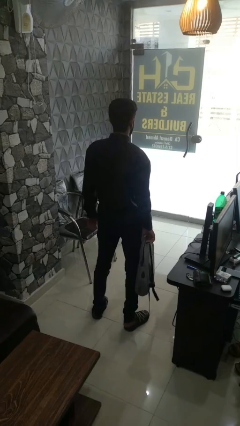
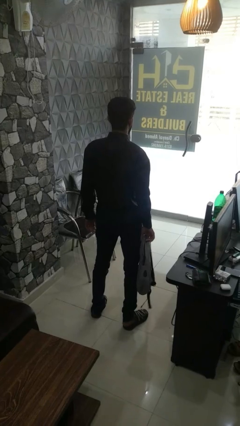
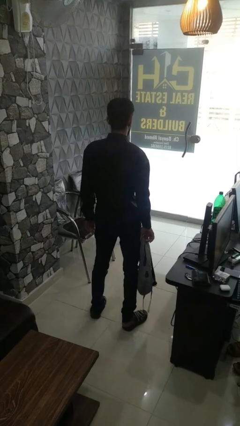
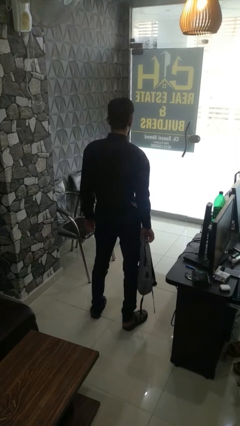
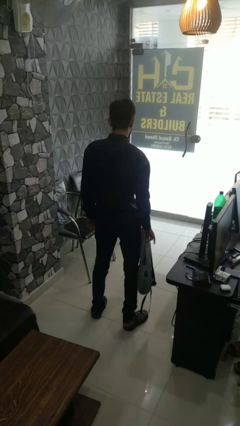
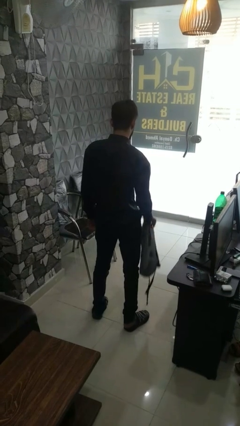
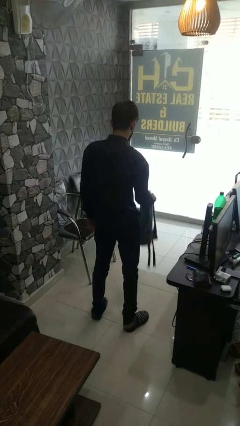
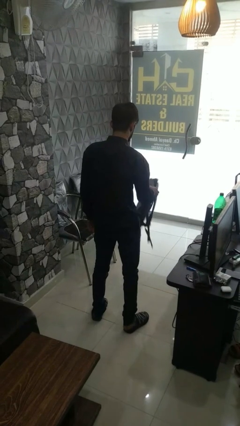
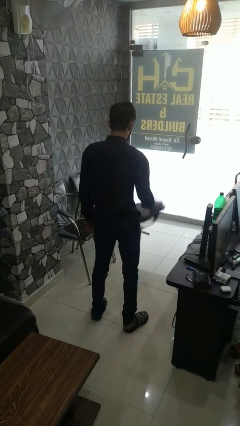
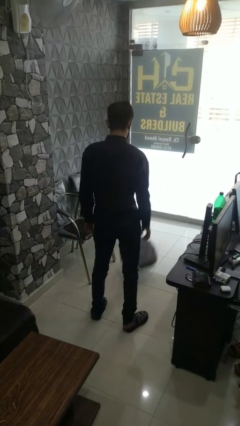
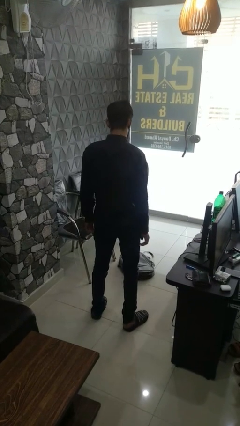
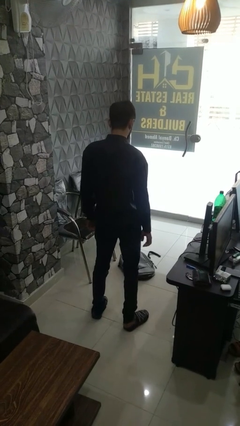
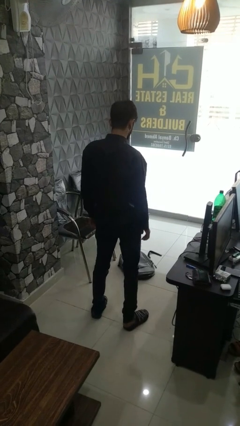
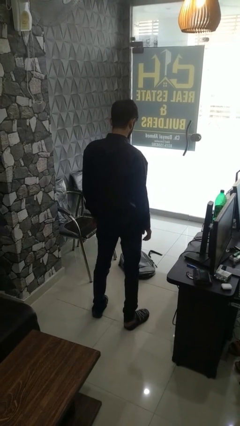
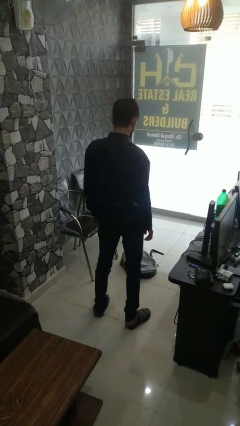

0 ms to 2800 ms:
person throws object into air

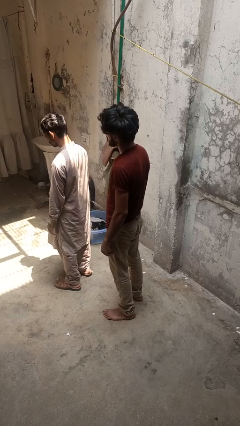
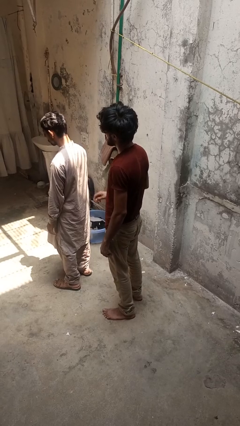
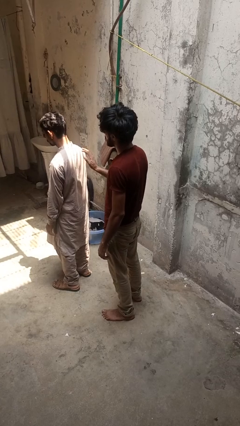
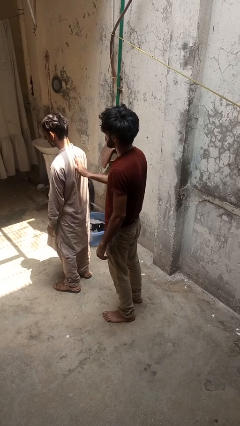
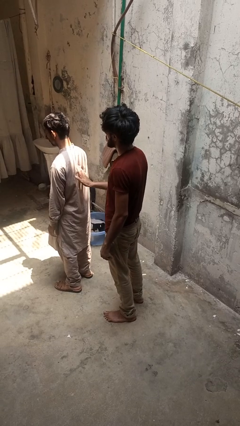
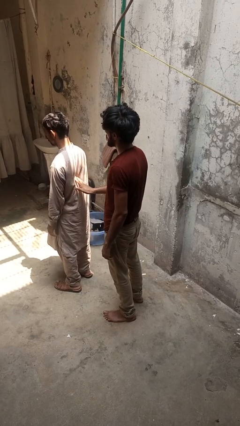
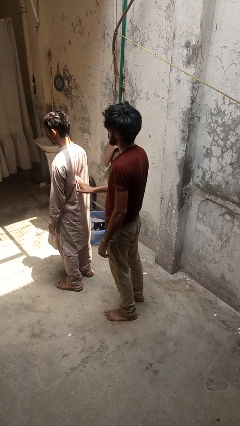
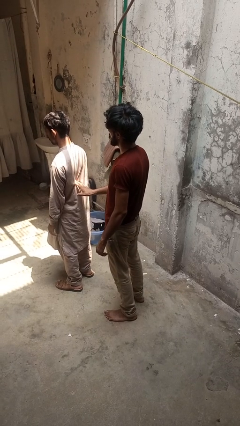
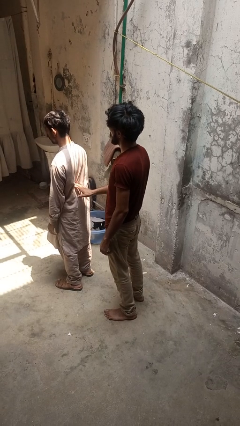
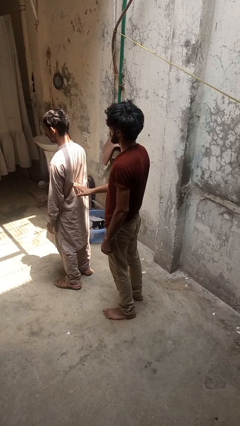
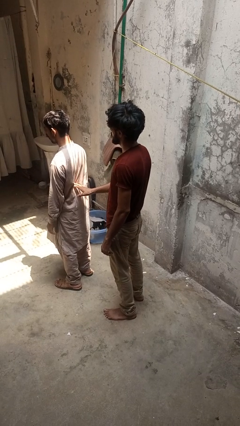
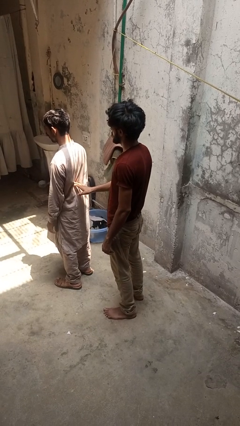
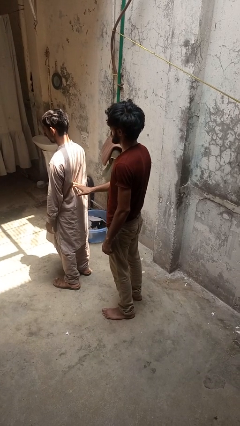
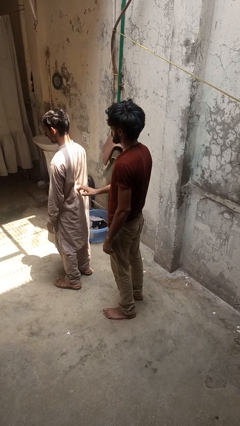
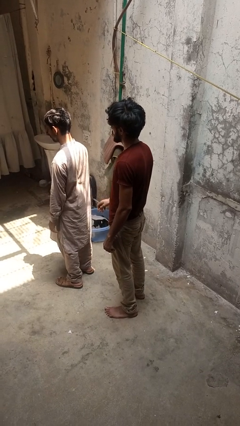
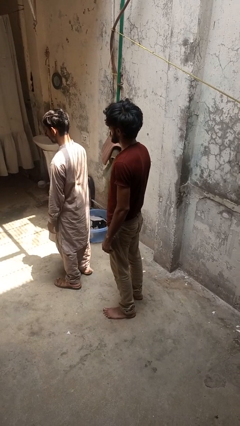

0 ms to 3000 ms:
person touches back of person

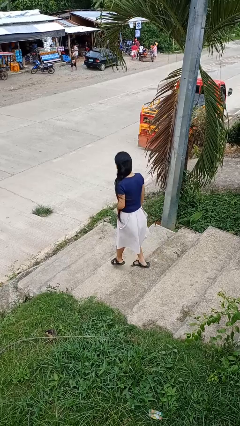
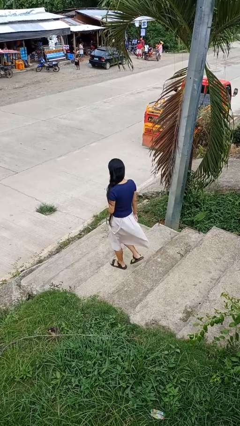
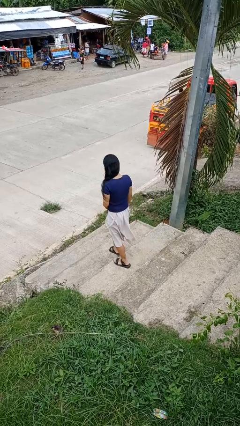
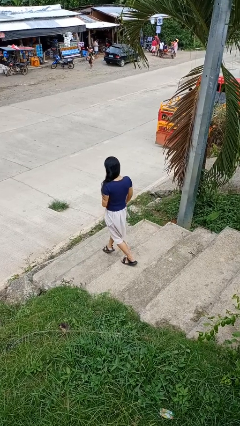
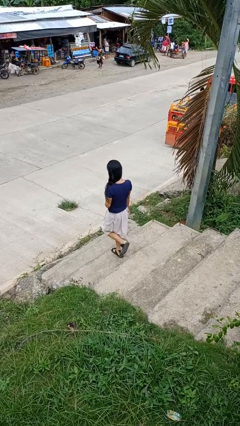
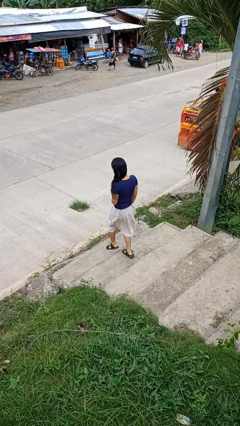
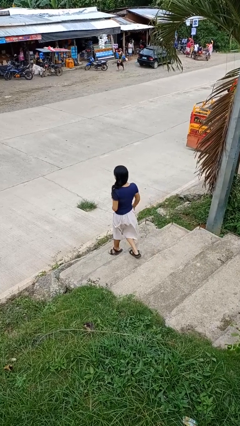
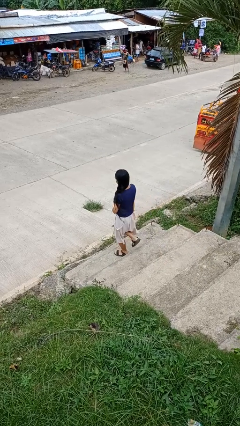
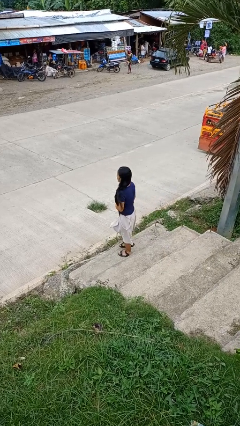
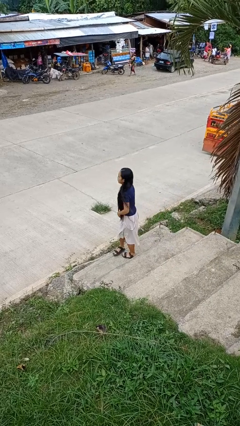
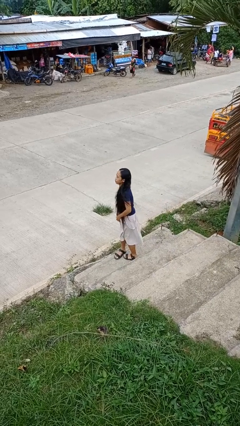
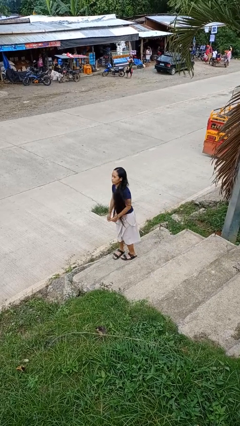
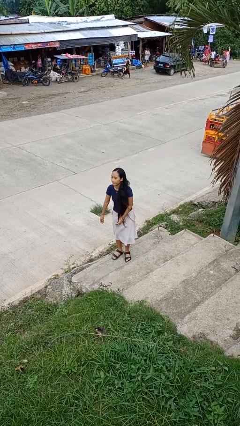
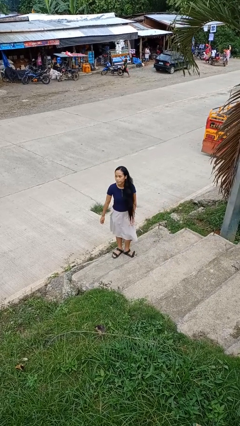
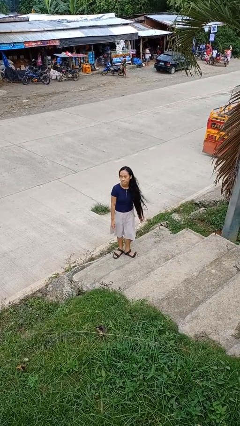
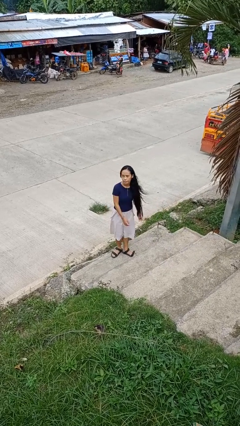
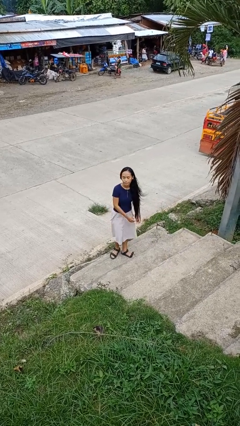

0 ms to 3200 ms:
person climbs down stairs

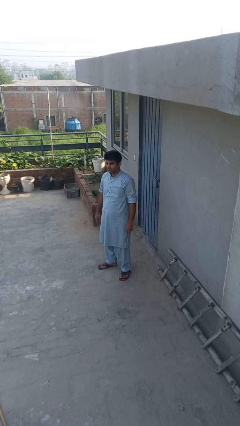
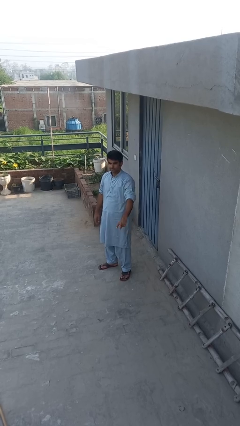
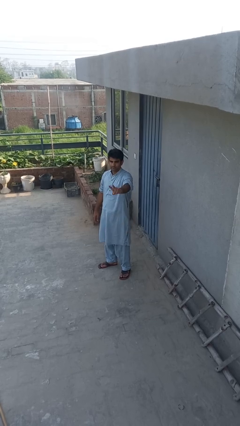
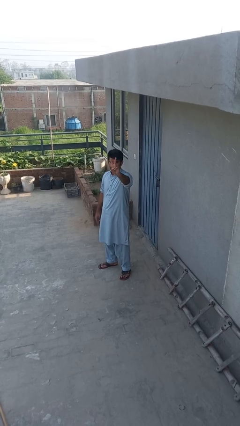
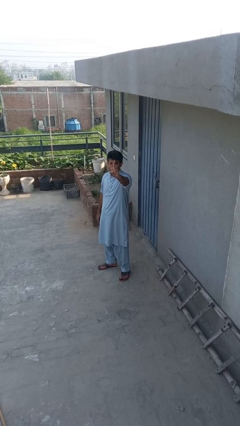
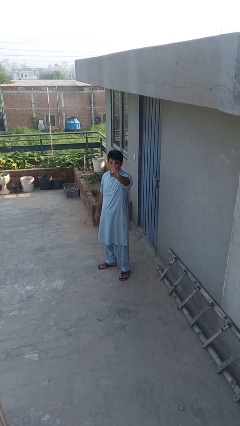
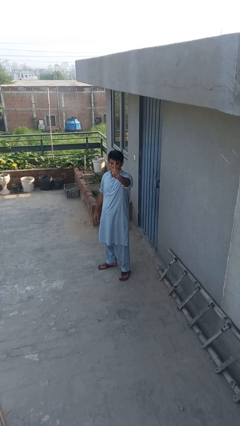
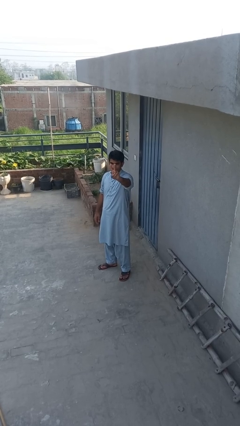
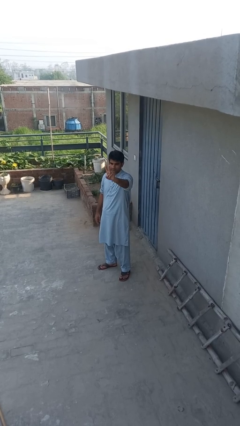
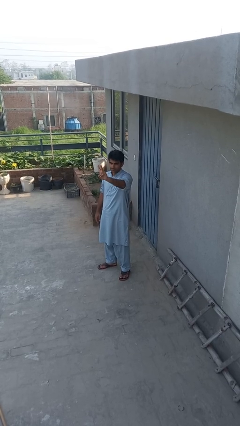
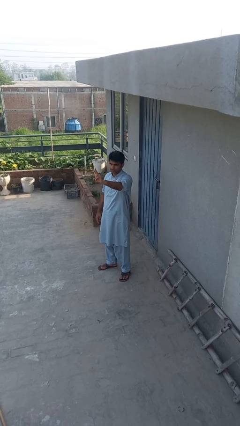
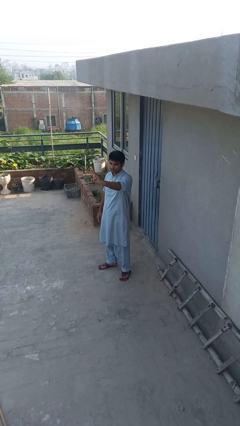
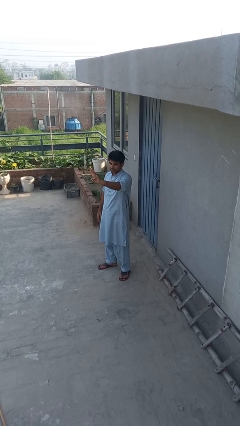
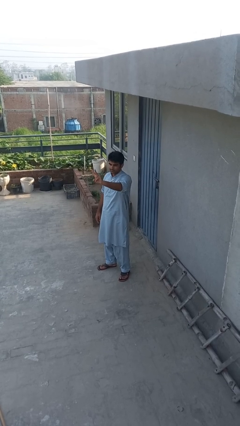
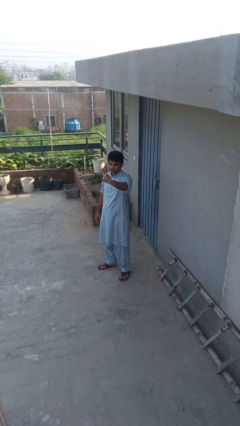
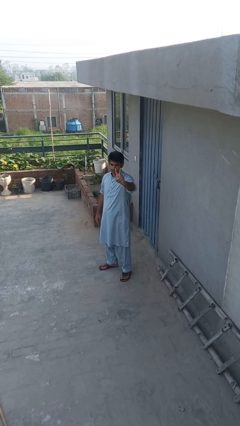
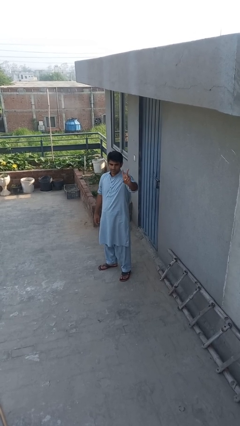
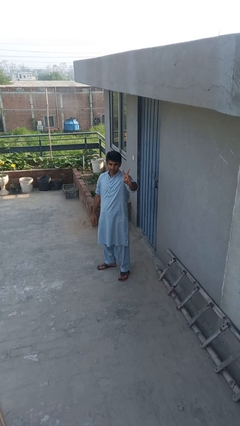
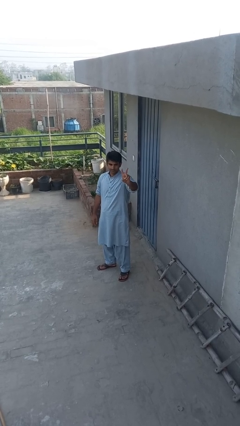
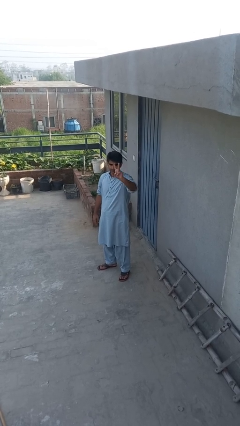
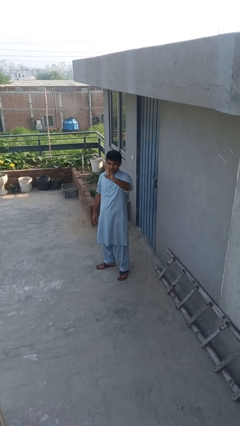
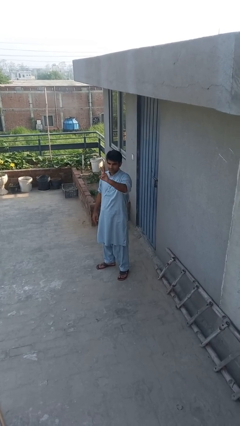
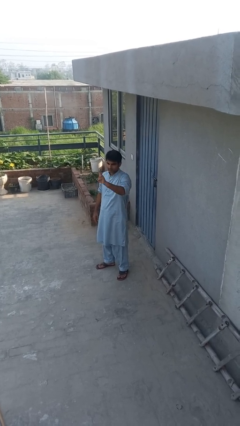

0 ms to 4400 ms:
person gestures peace

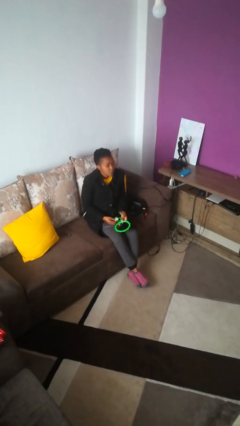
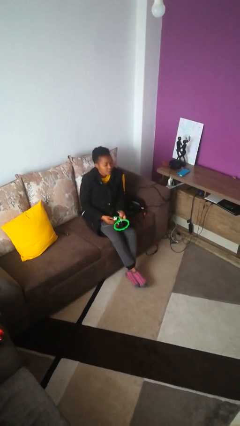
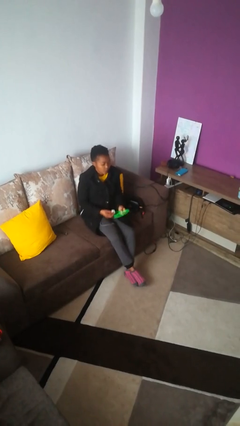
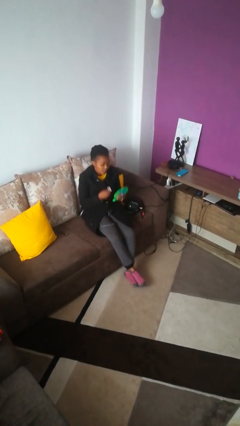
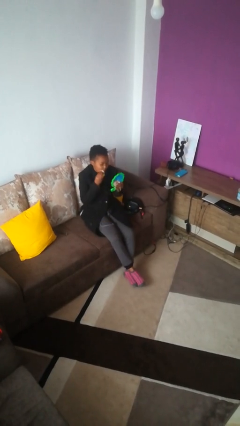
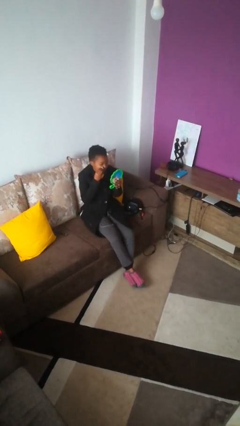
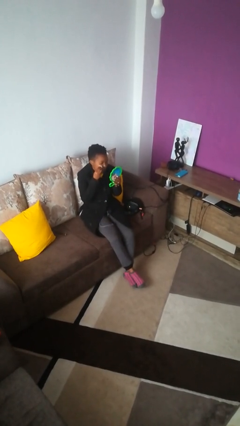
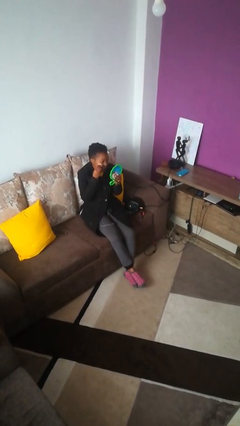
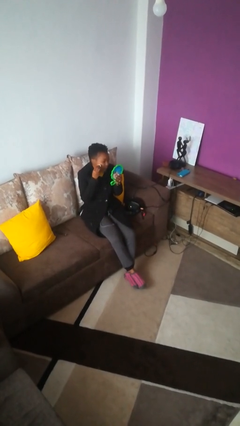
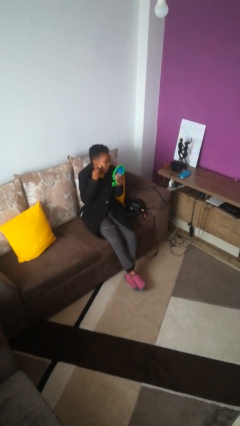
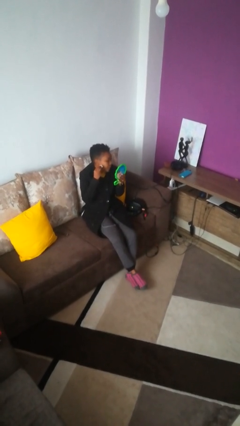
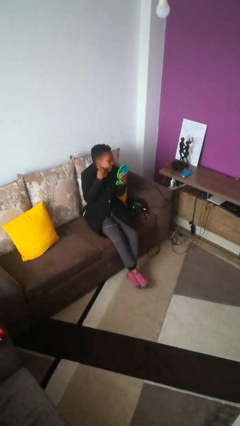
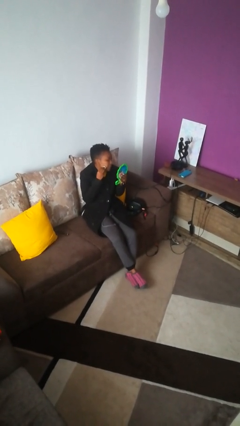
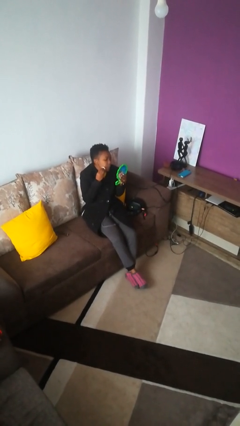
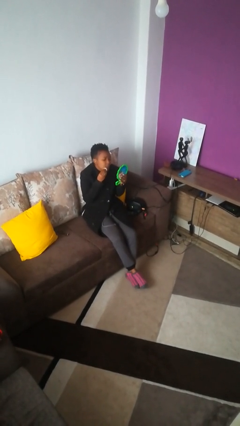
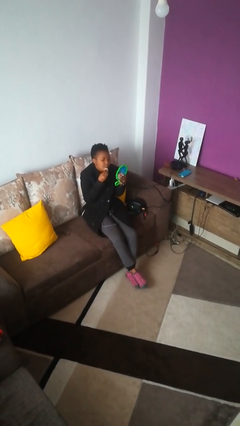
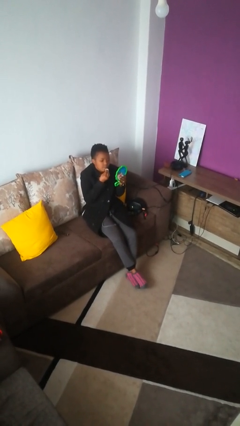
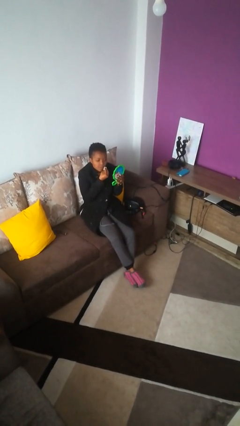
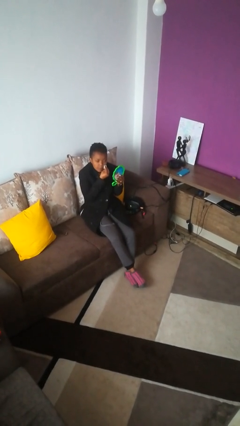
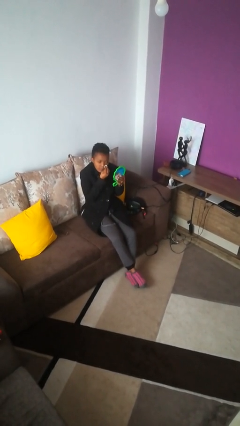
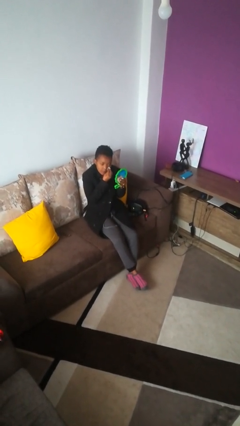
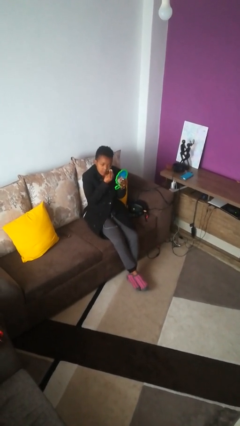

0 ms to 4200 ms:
person applies foundation makeup
